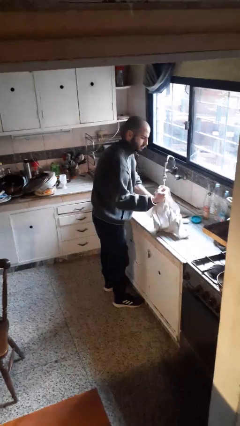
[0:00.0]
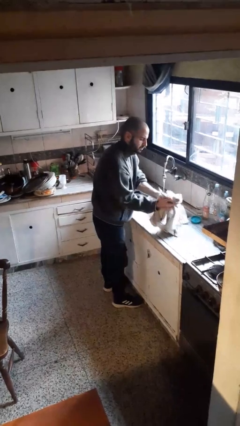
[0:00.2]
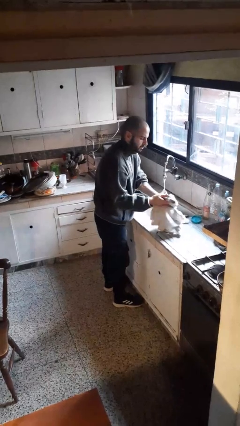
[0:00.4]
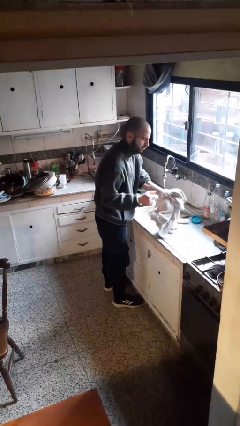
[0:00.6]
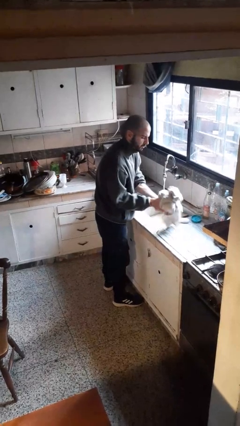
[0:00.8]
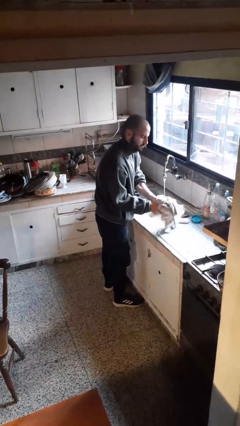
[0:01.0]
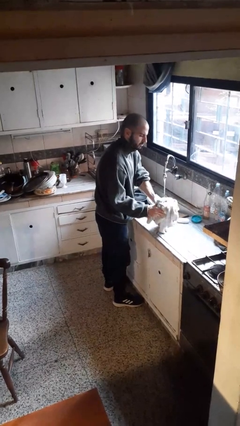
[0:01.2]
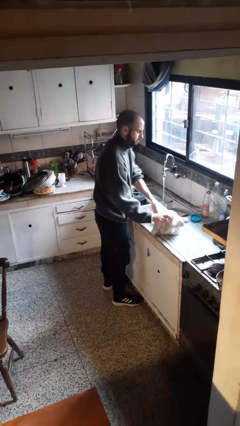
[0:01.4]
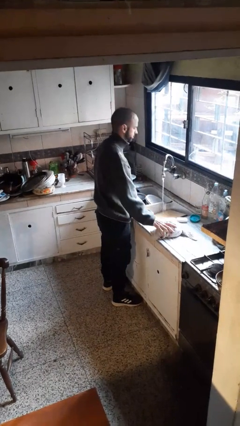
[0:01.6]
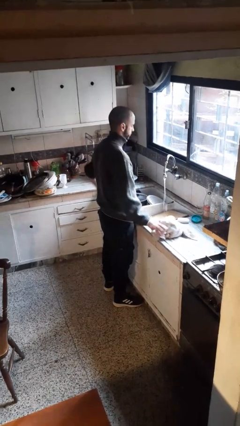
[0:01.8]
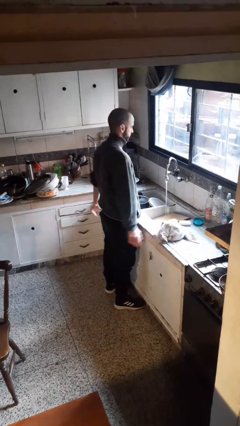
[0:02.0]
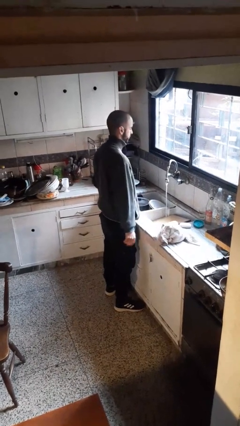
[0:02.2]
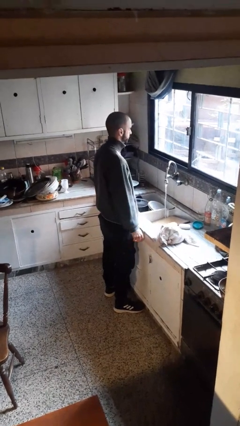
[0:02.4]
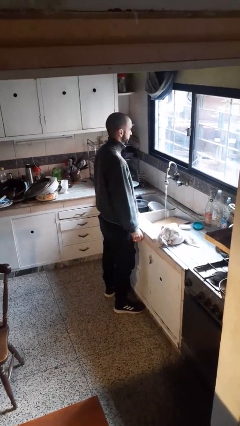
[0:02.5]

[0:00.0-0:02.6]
person dries hands with towel

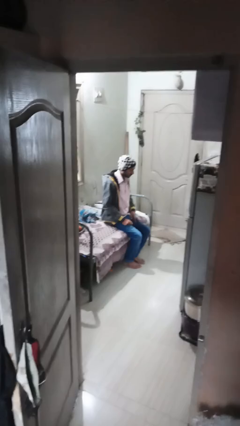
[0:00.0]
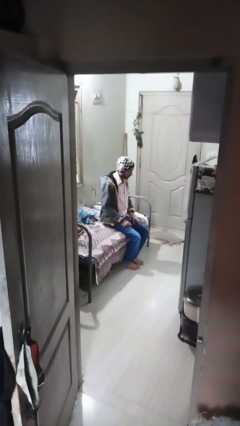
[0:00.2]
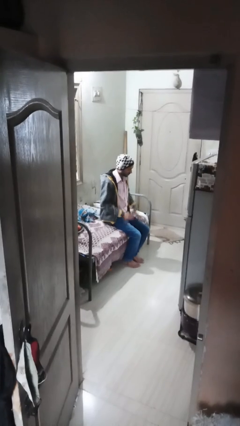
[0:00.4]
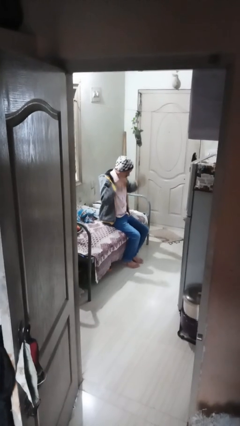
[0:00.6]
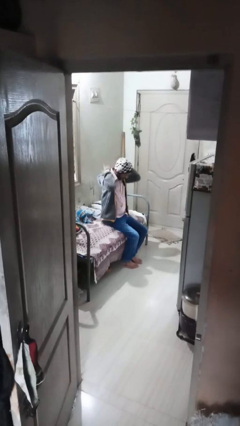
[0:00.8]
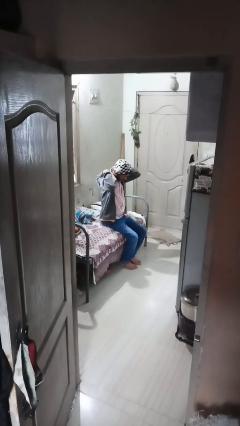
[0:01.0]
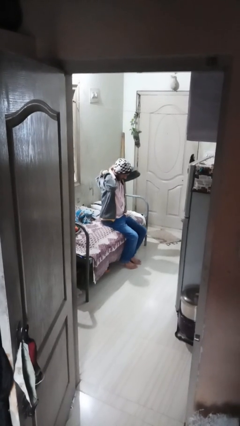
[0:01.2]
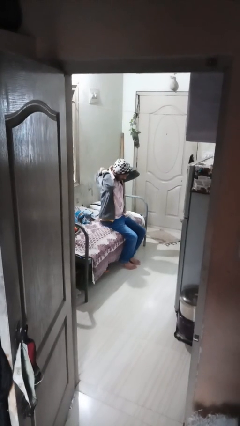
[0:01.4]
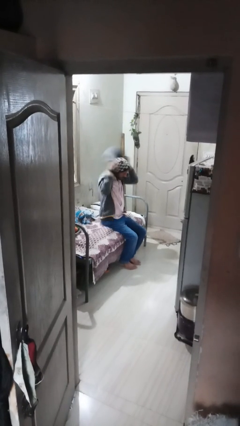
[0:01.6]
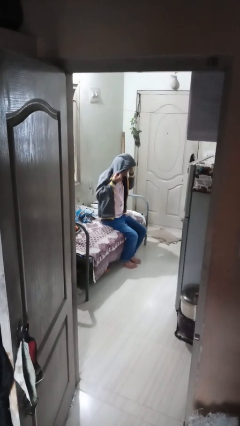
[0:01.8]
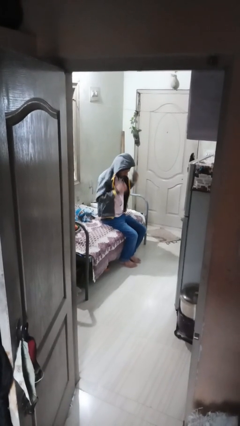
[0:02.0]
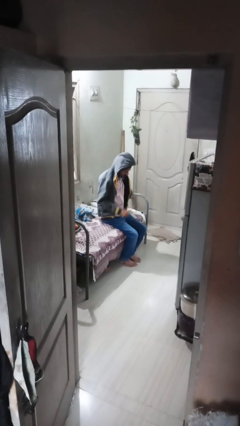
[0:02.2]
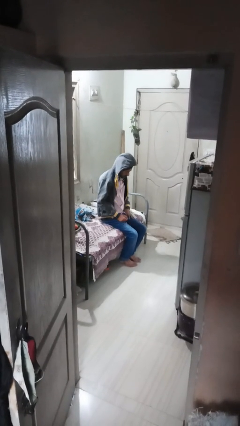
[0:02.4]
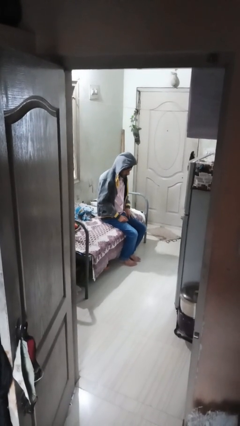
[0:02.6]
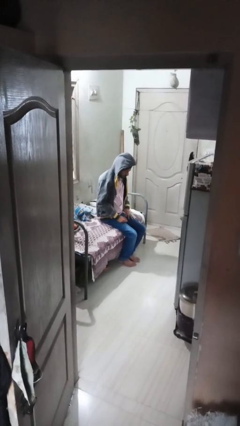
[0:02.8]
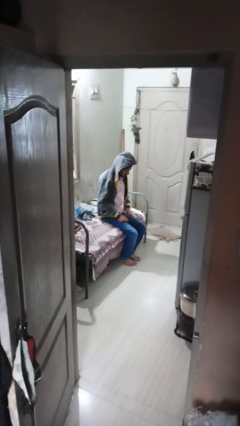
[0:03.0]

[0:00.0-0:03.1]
person puts on hoodie

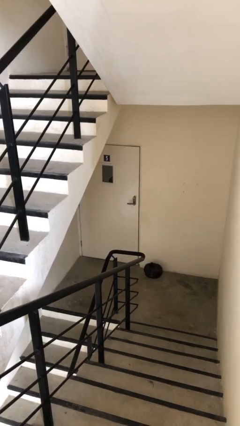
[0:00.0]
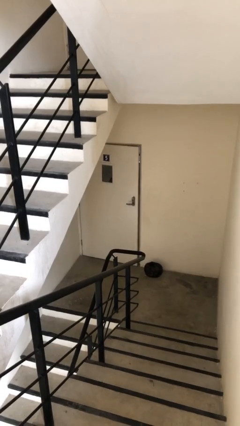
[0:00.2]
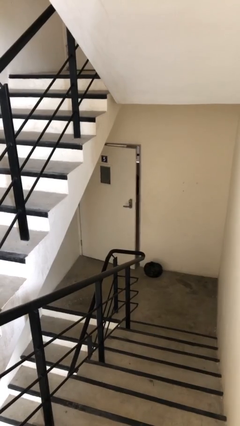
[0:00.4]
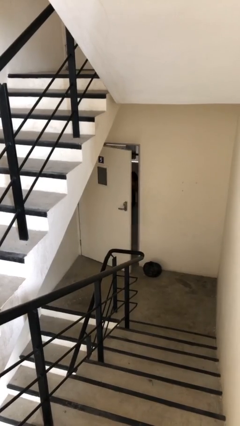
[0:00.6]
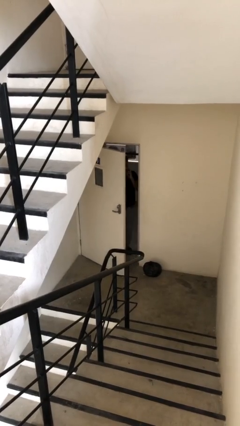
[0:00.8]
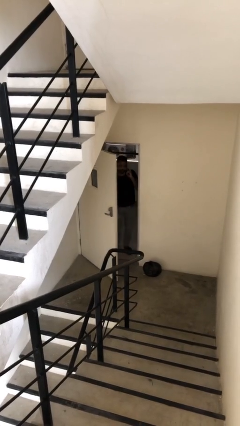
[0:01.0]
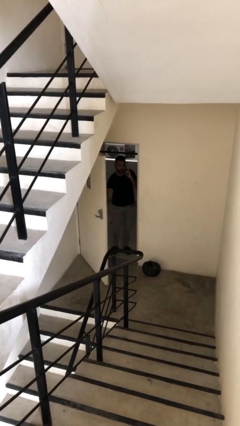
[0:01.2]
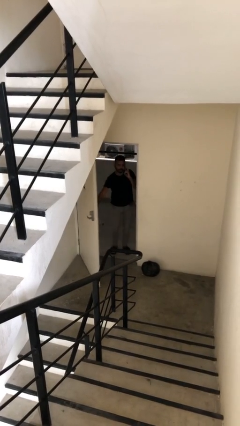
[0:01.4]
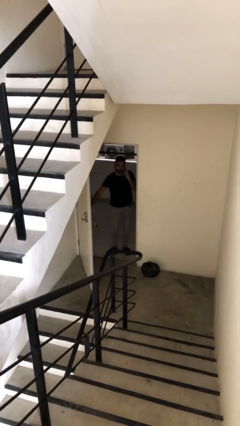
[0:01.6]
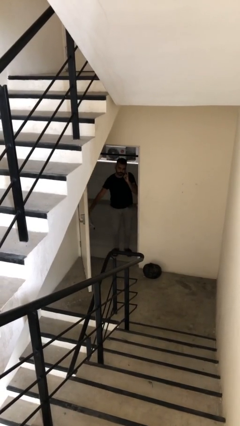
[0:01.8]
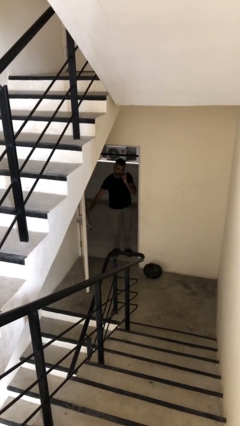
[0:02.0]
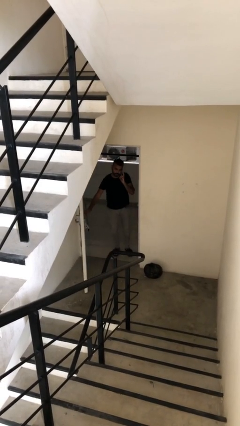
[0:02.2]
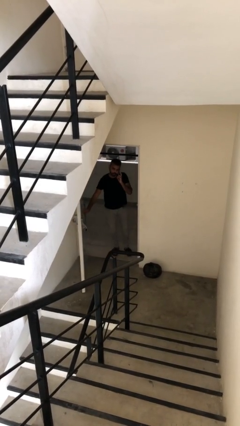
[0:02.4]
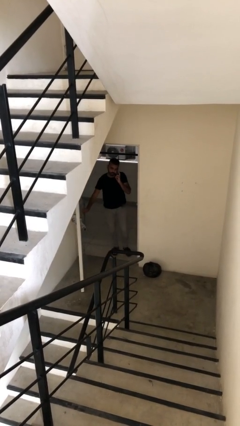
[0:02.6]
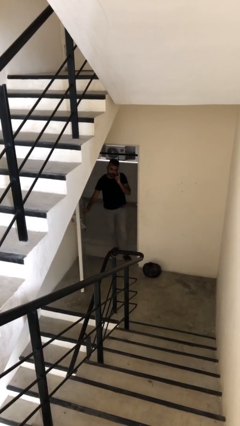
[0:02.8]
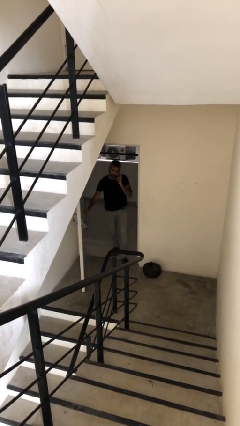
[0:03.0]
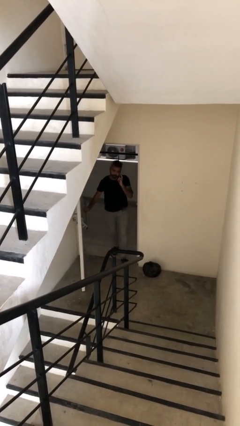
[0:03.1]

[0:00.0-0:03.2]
person opens facility door

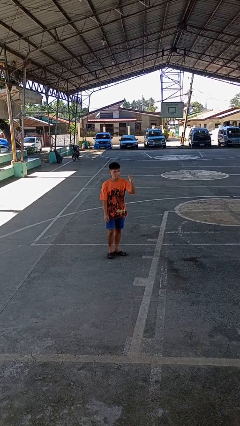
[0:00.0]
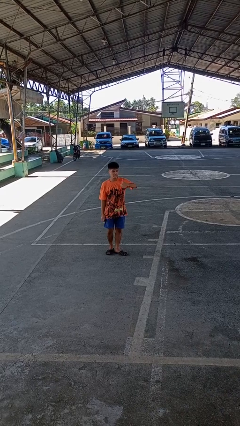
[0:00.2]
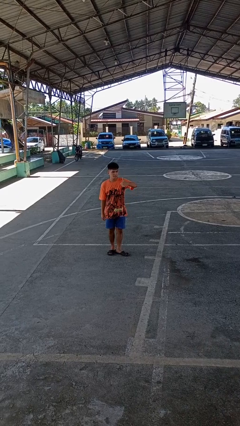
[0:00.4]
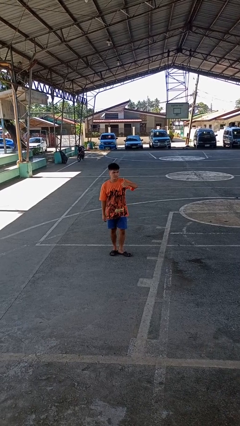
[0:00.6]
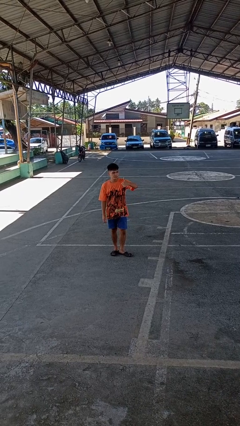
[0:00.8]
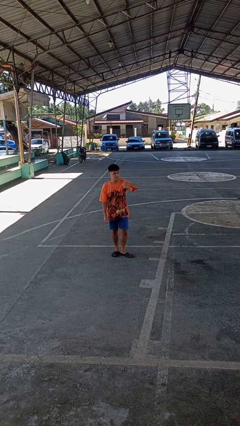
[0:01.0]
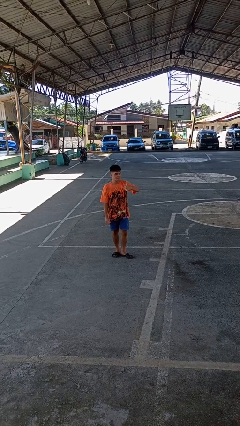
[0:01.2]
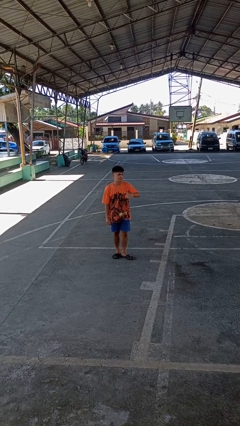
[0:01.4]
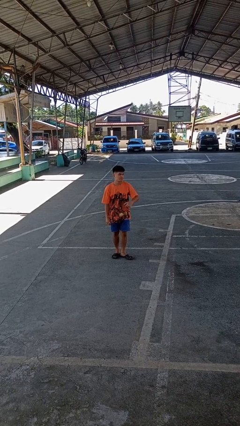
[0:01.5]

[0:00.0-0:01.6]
person gestures thumbs up

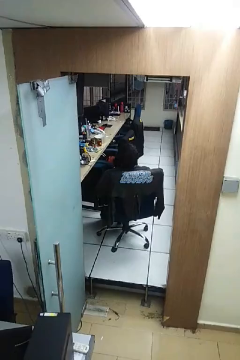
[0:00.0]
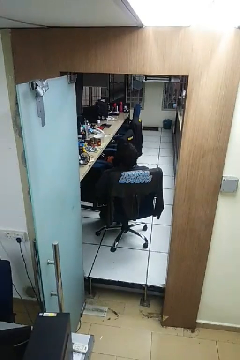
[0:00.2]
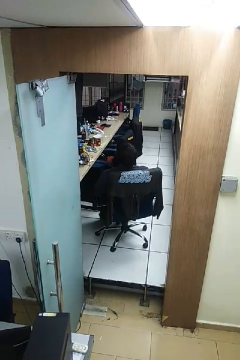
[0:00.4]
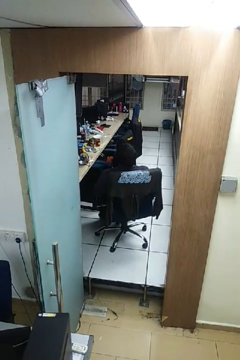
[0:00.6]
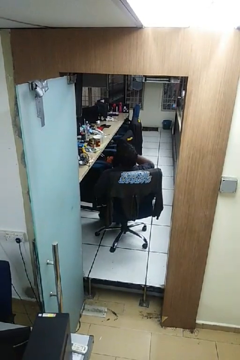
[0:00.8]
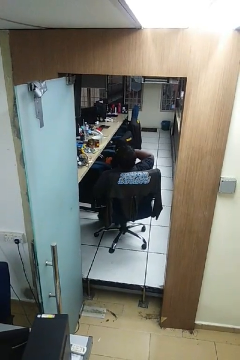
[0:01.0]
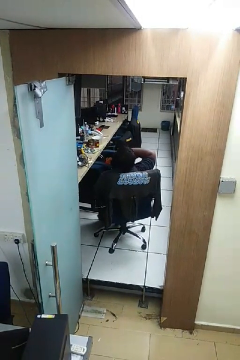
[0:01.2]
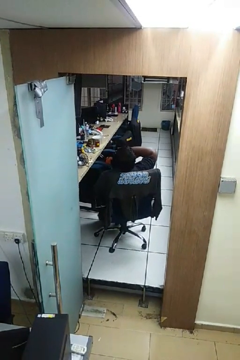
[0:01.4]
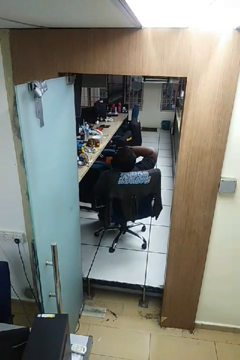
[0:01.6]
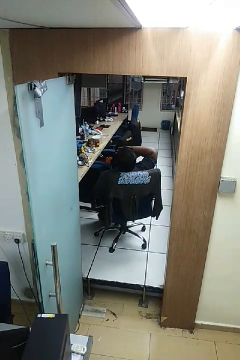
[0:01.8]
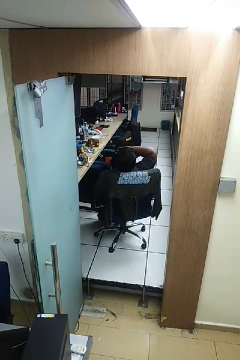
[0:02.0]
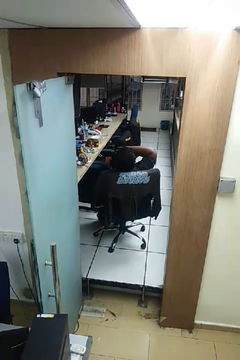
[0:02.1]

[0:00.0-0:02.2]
person yawns

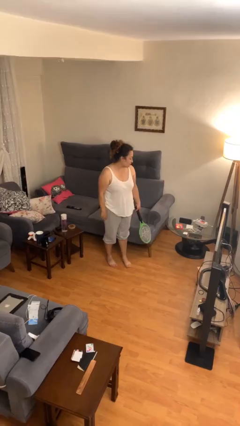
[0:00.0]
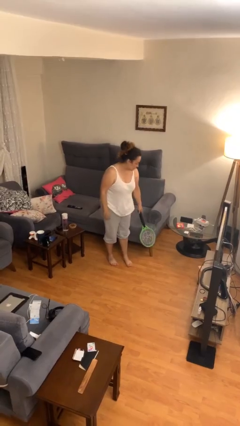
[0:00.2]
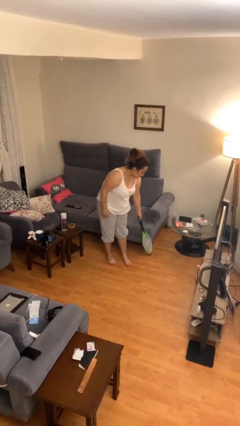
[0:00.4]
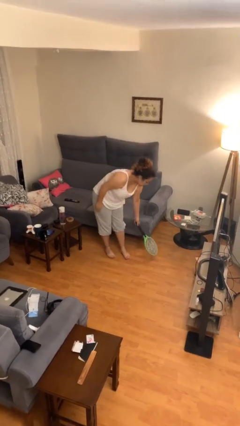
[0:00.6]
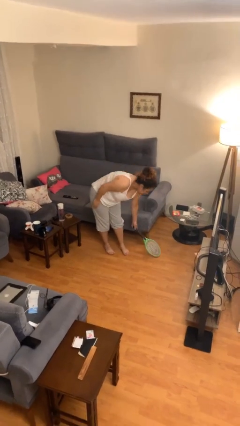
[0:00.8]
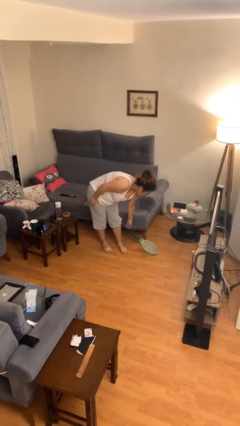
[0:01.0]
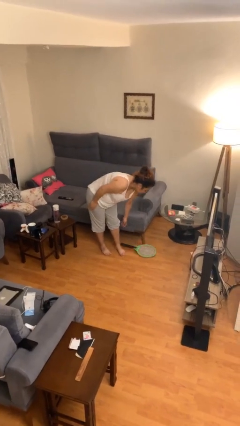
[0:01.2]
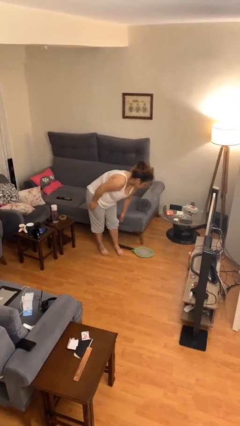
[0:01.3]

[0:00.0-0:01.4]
person puts down object on floor

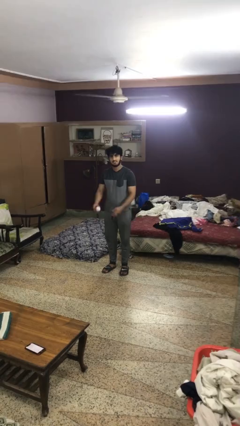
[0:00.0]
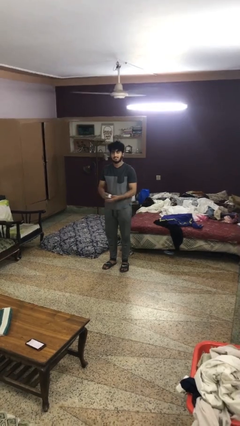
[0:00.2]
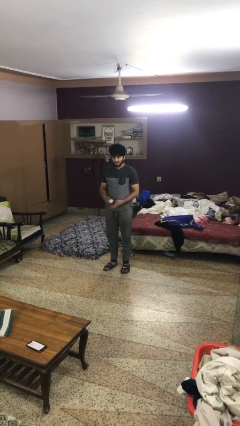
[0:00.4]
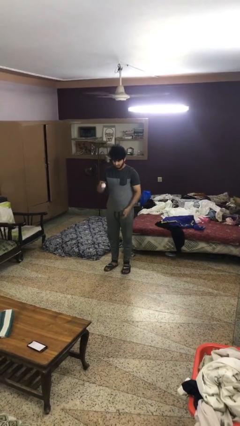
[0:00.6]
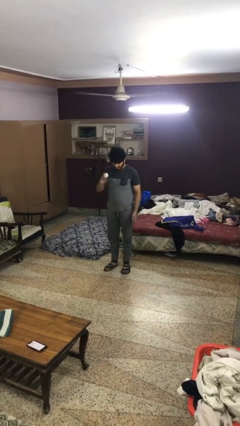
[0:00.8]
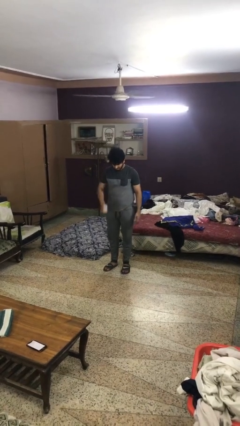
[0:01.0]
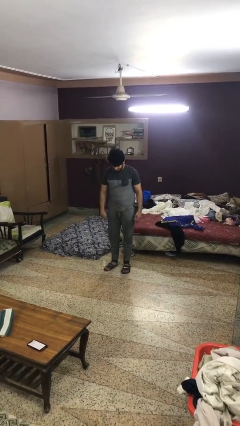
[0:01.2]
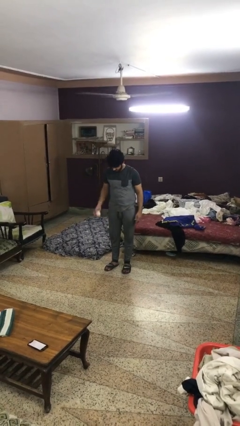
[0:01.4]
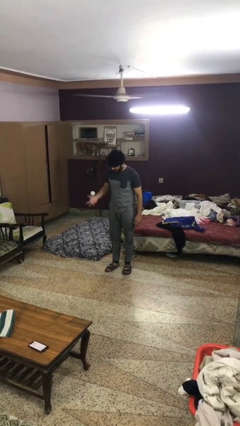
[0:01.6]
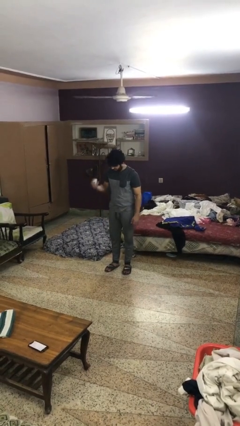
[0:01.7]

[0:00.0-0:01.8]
person bounces ball on floor

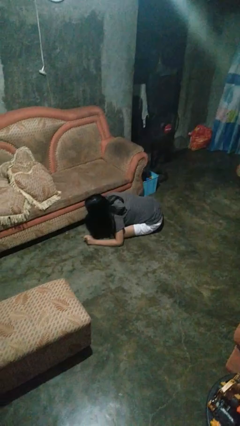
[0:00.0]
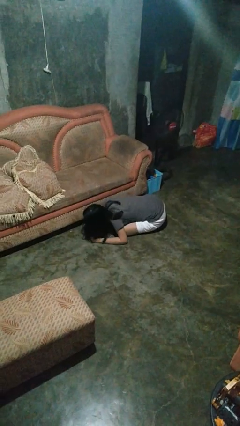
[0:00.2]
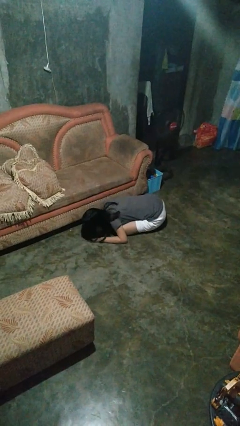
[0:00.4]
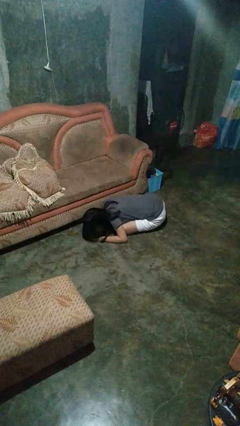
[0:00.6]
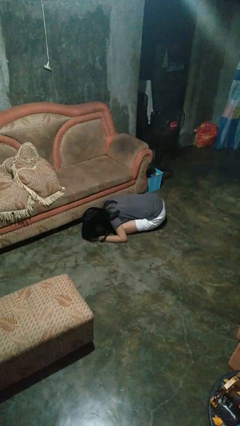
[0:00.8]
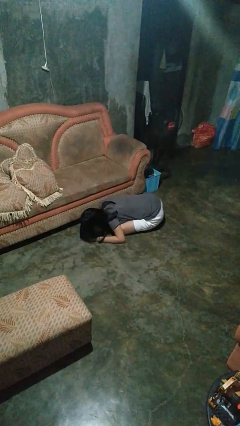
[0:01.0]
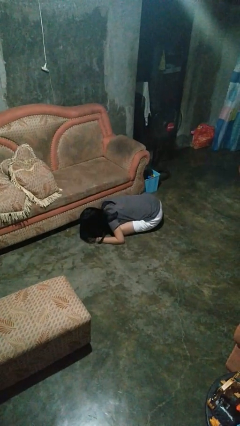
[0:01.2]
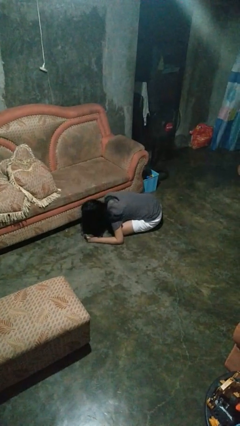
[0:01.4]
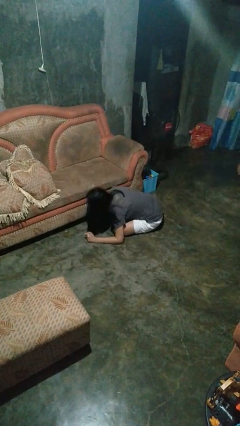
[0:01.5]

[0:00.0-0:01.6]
person searches under couch
